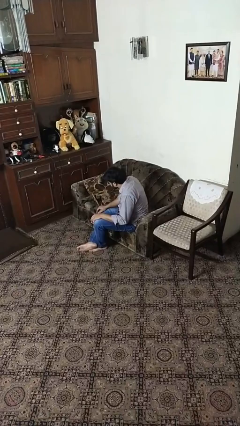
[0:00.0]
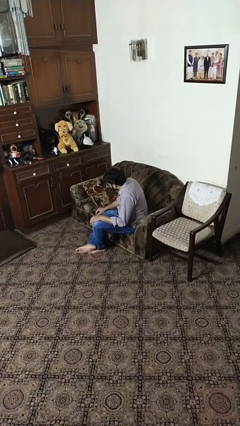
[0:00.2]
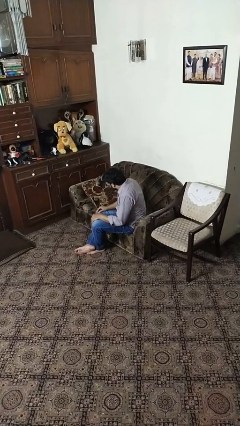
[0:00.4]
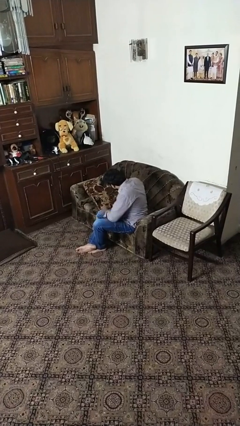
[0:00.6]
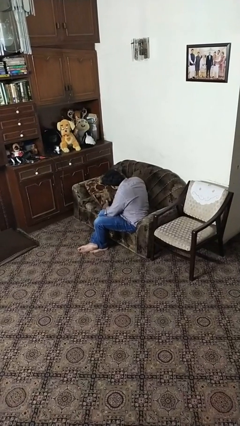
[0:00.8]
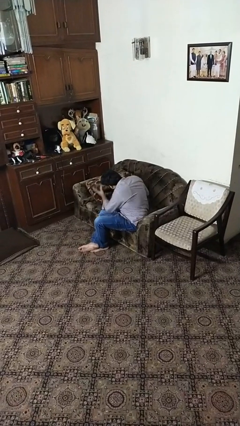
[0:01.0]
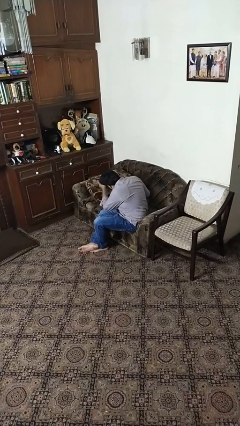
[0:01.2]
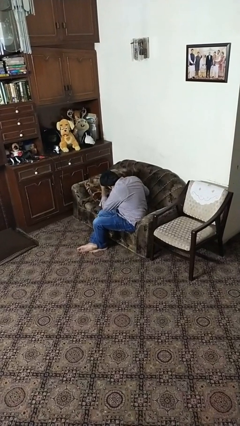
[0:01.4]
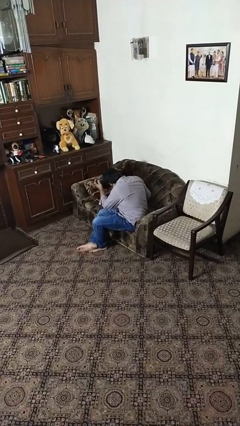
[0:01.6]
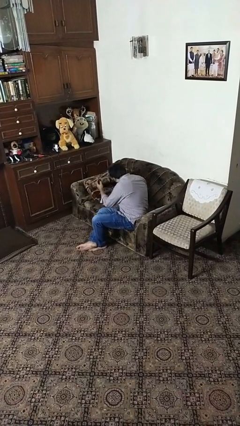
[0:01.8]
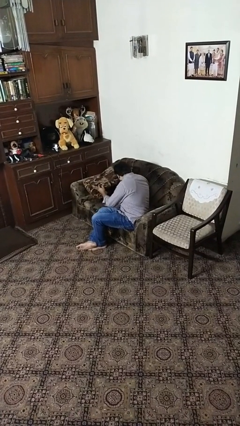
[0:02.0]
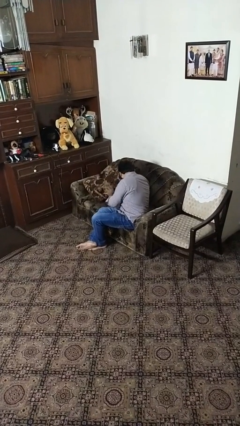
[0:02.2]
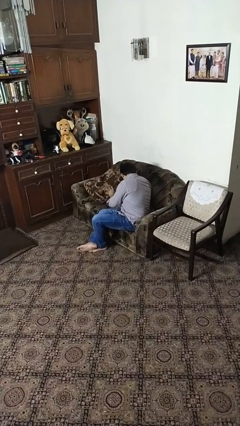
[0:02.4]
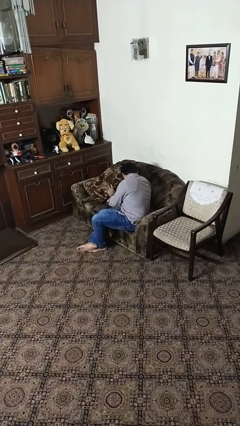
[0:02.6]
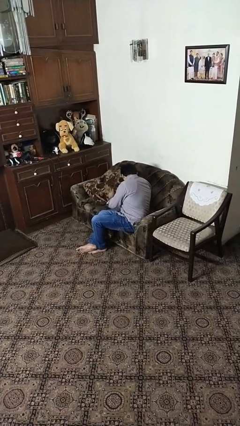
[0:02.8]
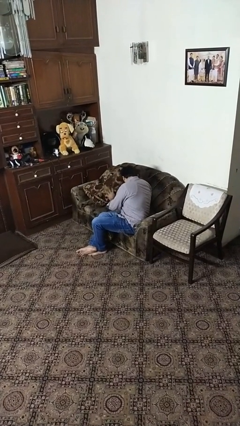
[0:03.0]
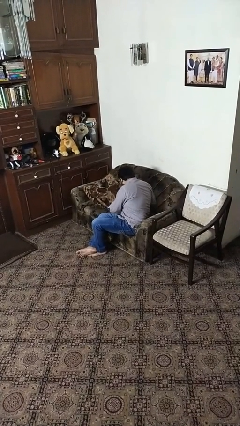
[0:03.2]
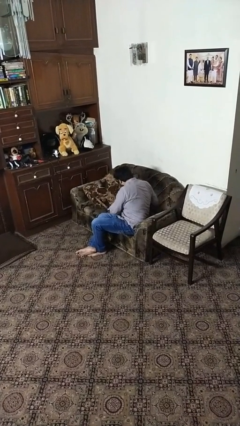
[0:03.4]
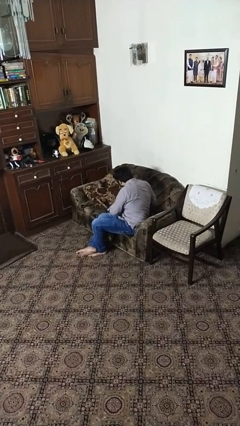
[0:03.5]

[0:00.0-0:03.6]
person searches in couch

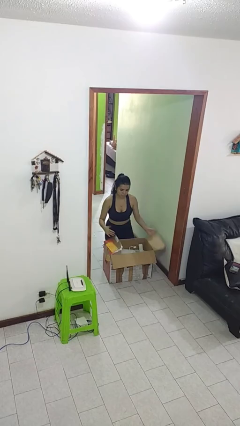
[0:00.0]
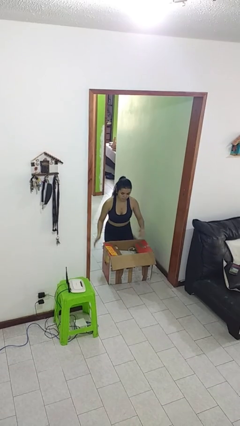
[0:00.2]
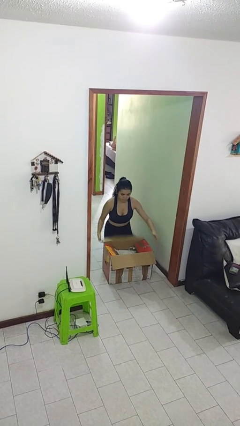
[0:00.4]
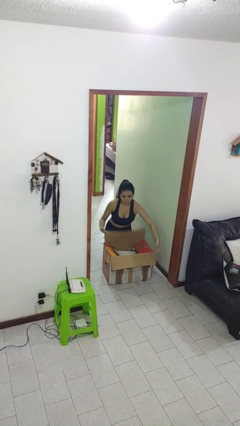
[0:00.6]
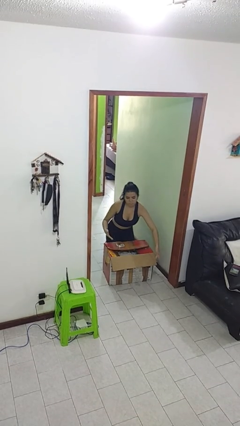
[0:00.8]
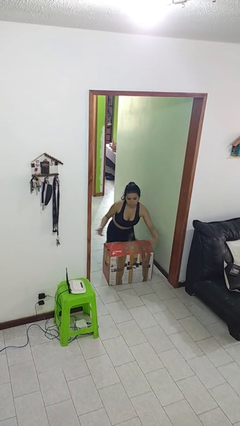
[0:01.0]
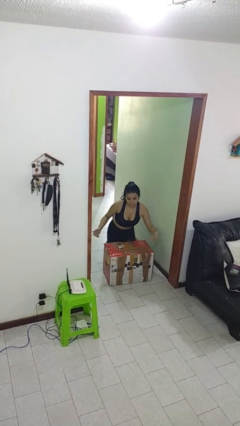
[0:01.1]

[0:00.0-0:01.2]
person closes box

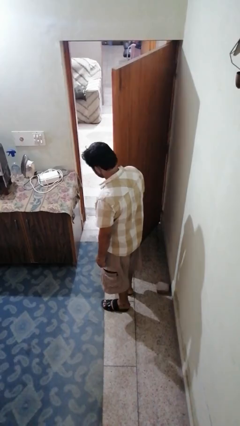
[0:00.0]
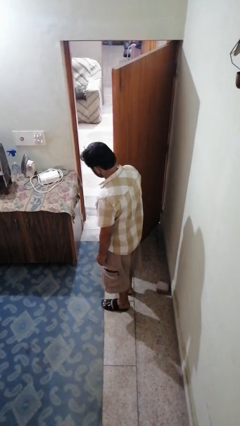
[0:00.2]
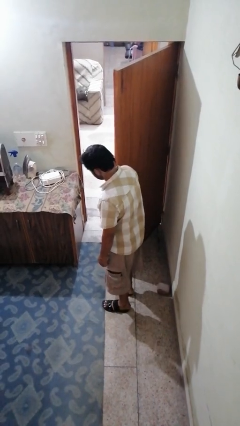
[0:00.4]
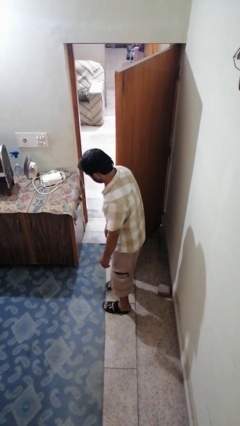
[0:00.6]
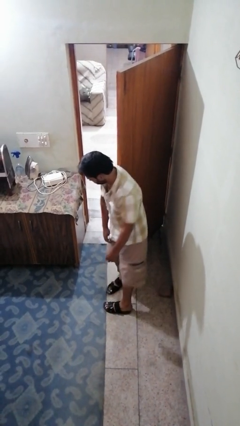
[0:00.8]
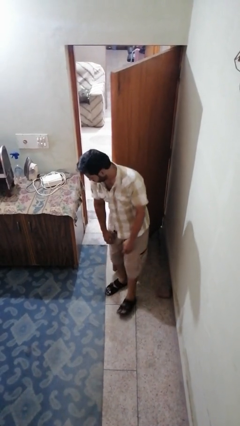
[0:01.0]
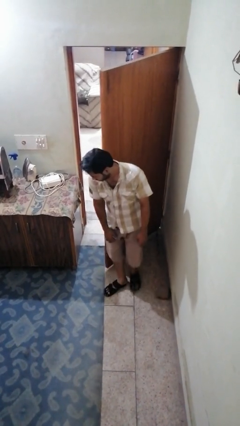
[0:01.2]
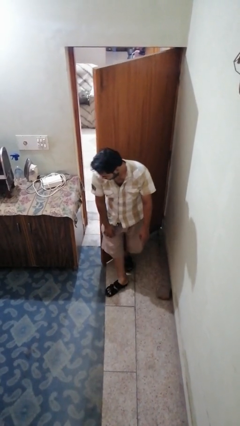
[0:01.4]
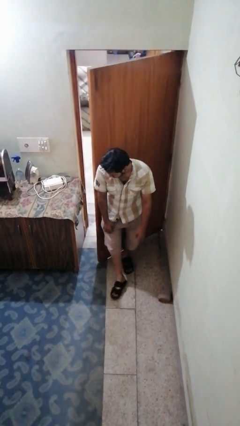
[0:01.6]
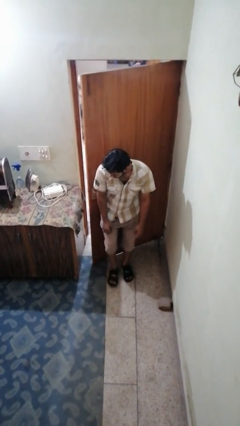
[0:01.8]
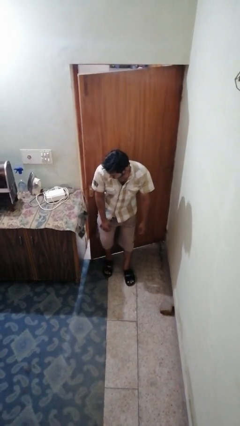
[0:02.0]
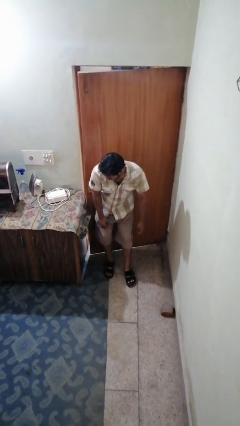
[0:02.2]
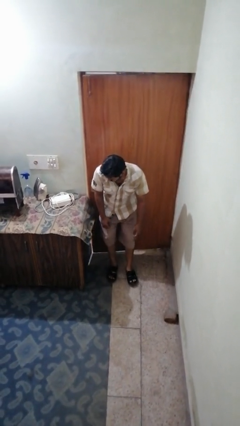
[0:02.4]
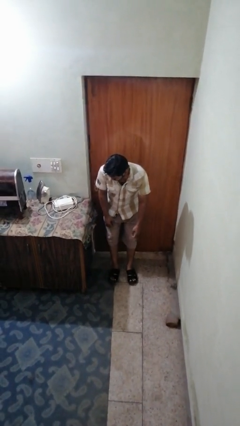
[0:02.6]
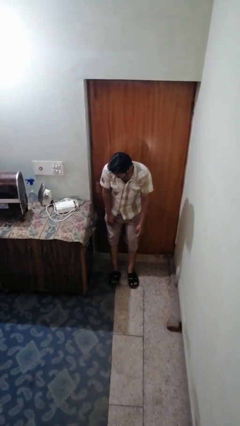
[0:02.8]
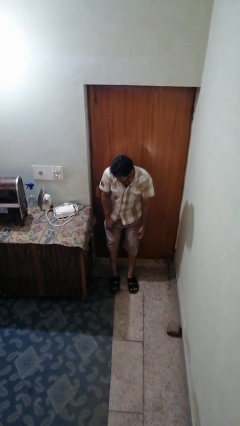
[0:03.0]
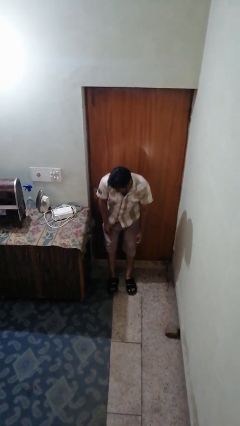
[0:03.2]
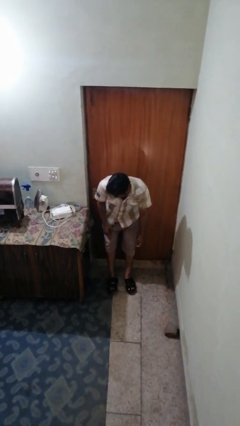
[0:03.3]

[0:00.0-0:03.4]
person closes door with hip

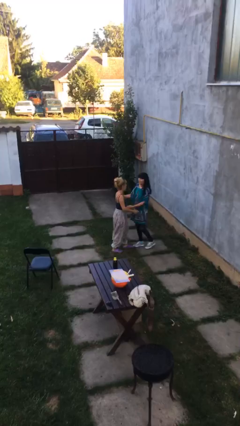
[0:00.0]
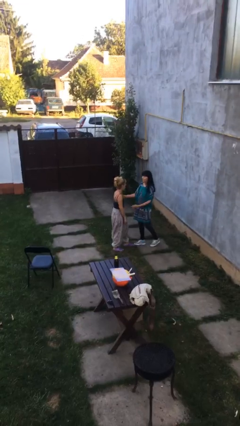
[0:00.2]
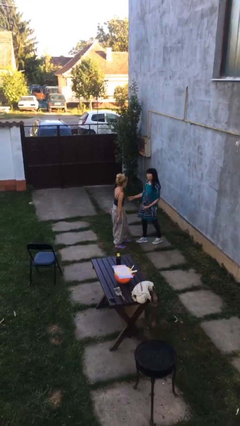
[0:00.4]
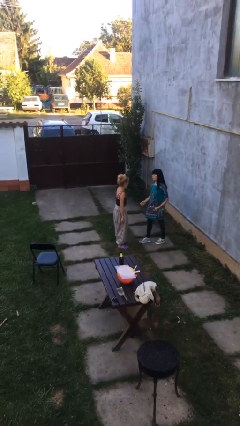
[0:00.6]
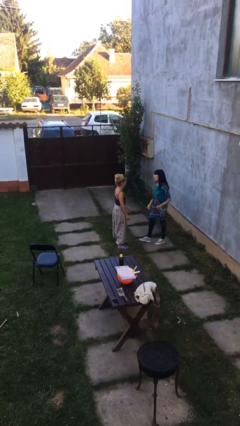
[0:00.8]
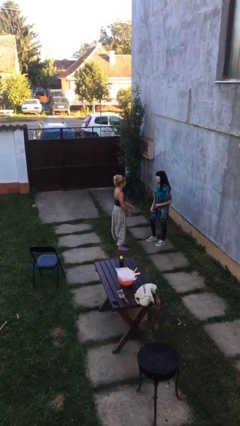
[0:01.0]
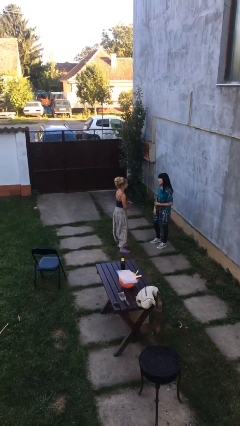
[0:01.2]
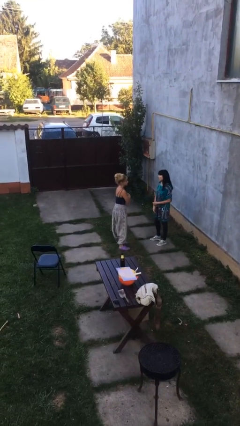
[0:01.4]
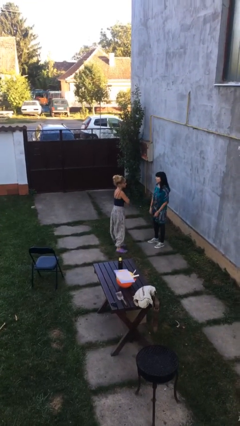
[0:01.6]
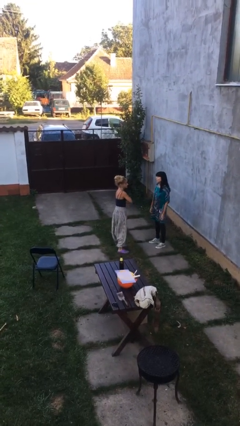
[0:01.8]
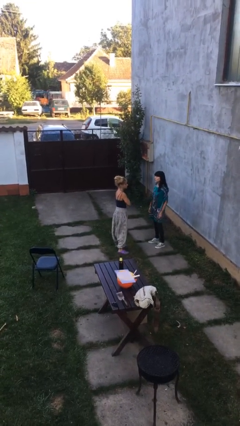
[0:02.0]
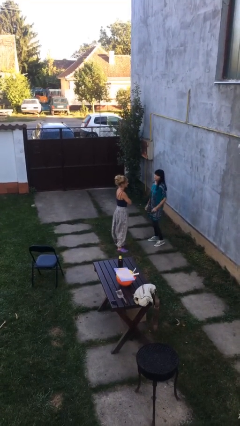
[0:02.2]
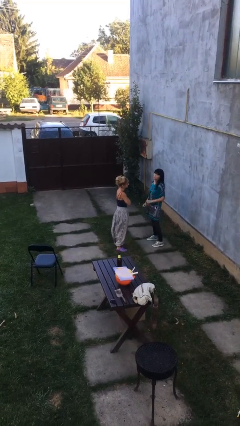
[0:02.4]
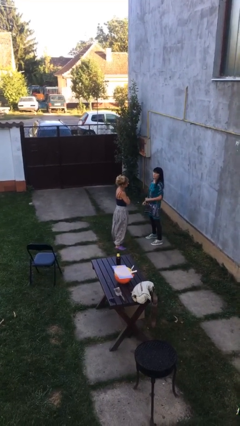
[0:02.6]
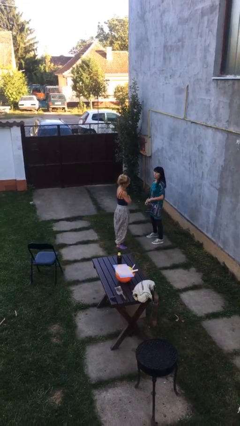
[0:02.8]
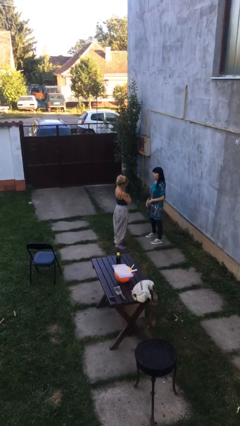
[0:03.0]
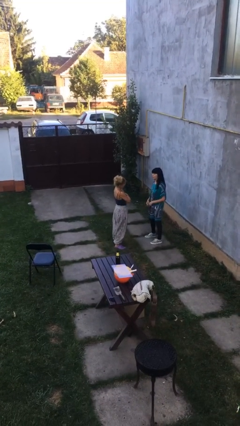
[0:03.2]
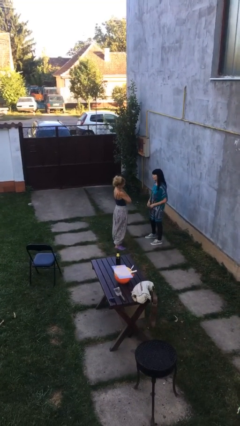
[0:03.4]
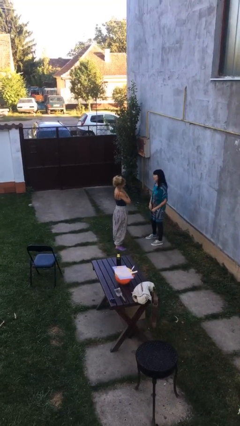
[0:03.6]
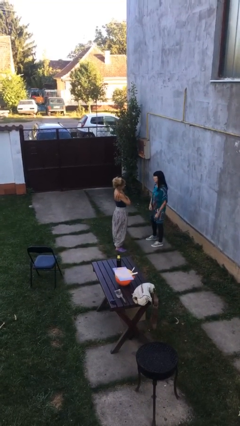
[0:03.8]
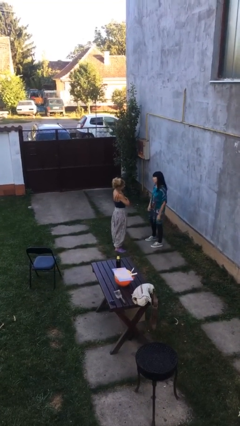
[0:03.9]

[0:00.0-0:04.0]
person talks to person

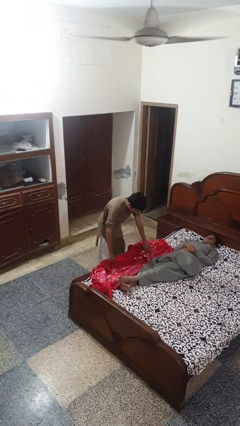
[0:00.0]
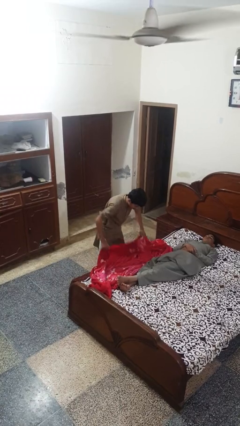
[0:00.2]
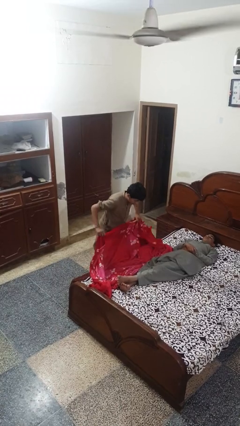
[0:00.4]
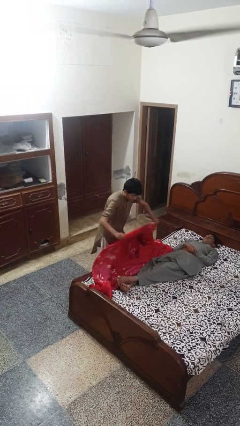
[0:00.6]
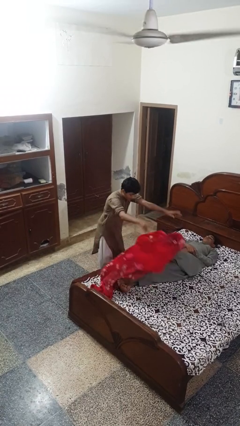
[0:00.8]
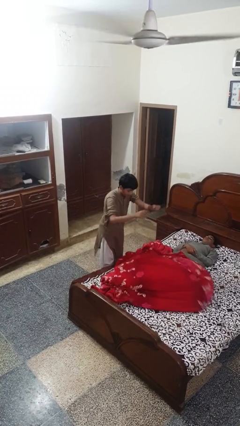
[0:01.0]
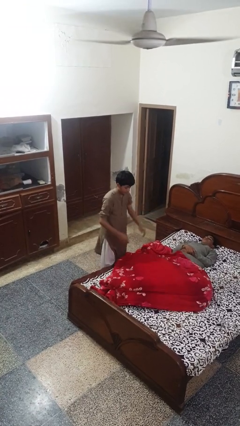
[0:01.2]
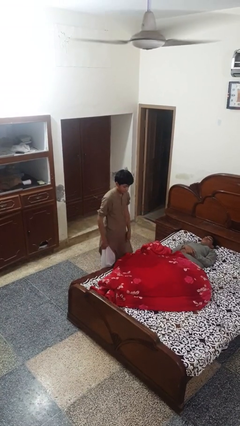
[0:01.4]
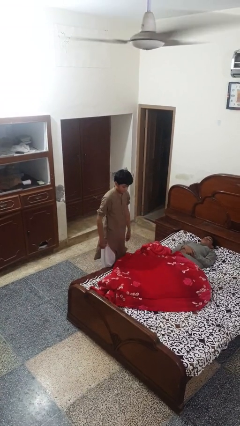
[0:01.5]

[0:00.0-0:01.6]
person covers friend with blanket

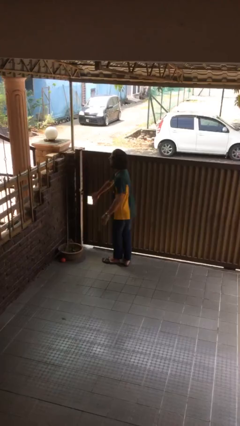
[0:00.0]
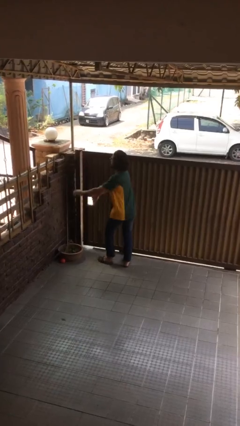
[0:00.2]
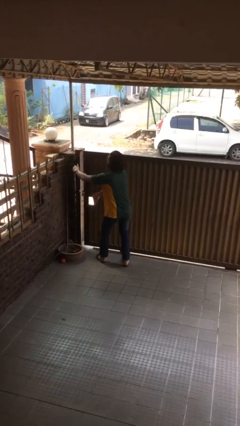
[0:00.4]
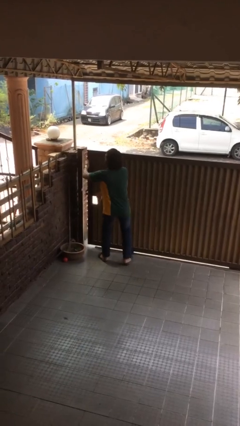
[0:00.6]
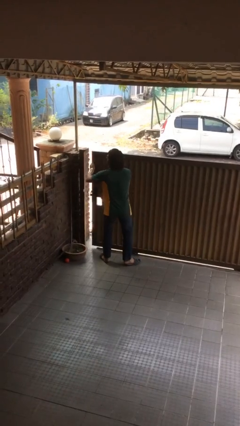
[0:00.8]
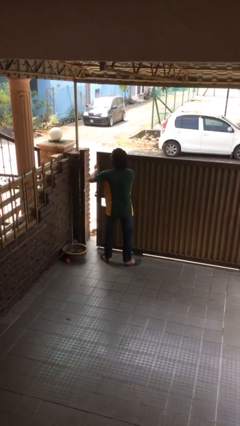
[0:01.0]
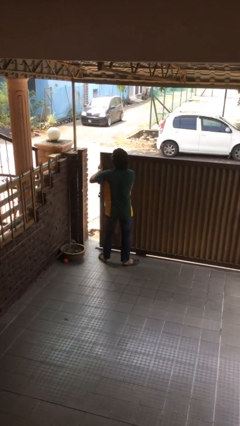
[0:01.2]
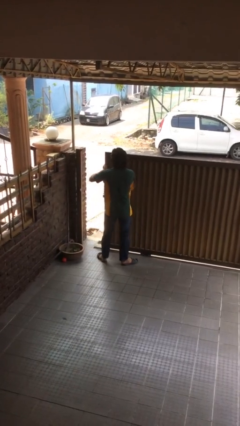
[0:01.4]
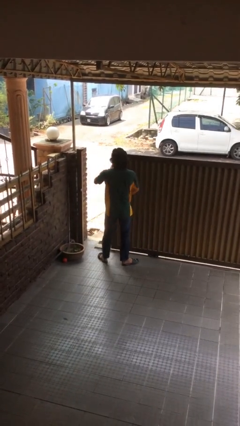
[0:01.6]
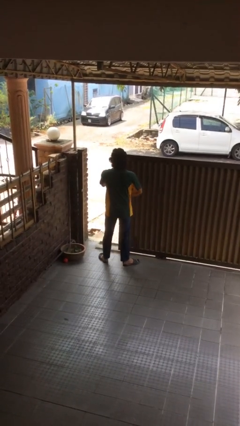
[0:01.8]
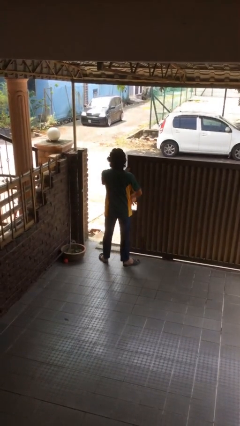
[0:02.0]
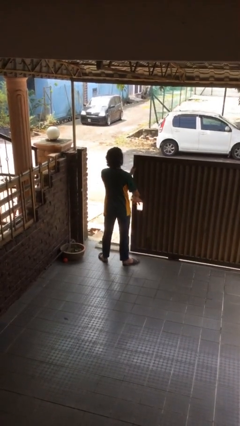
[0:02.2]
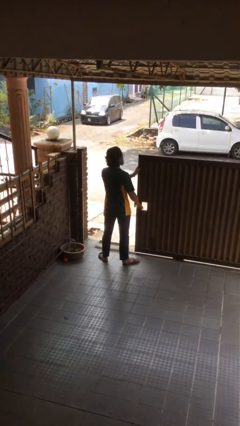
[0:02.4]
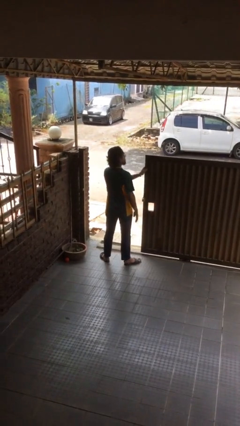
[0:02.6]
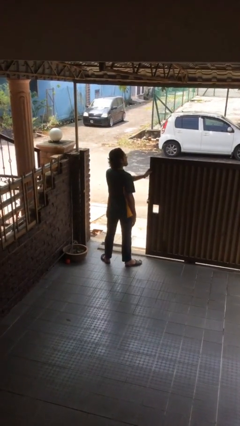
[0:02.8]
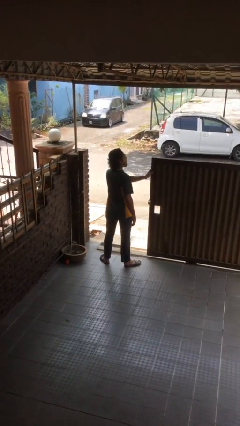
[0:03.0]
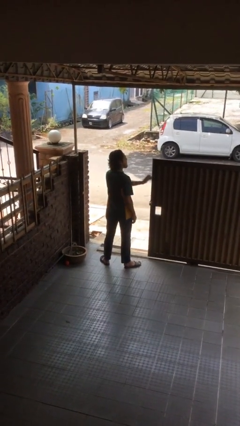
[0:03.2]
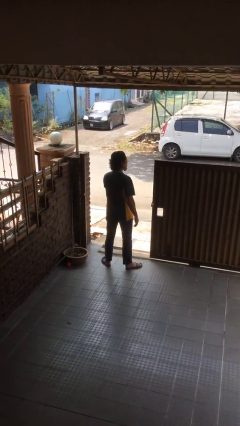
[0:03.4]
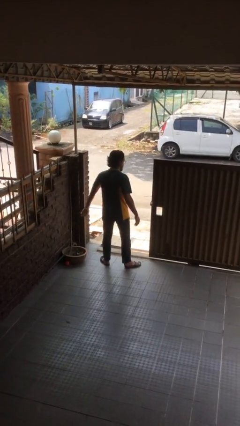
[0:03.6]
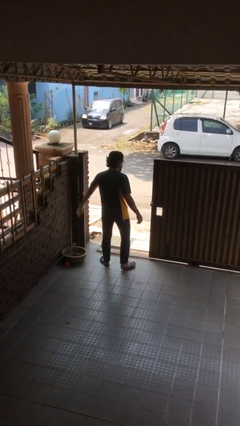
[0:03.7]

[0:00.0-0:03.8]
person opens facility door
